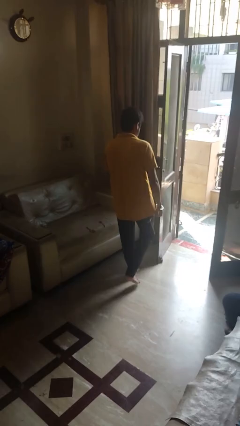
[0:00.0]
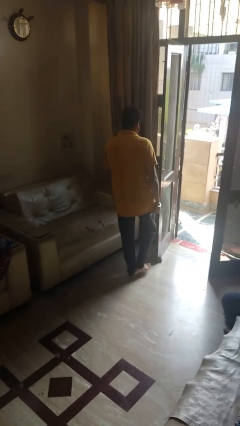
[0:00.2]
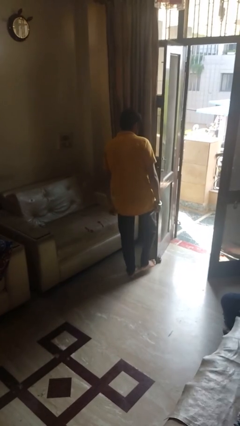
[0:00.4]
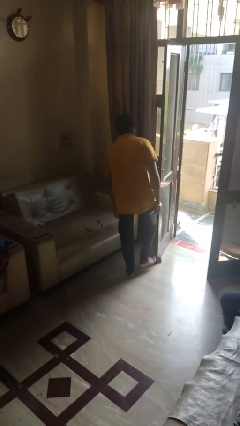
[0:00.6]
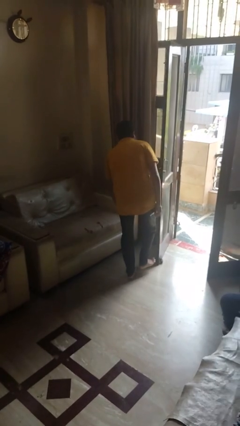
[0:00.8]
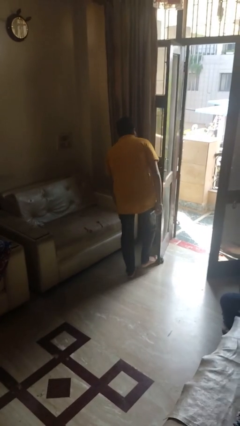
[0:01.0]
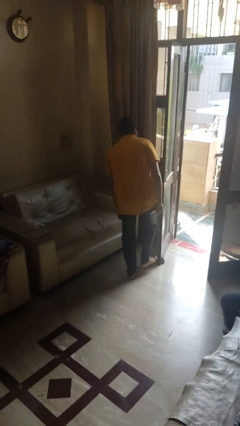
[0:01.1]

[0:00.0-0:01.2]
person stubs toe

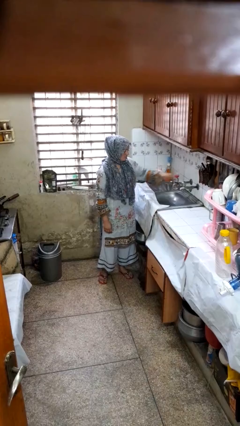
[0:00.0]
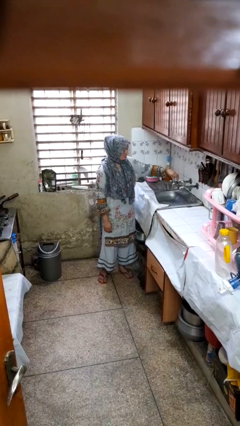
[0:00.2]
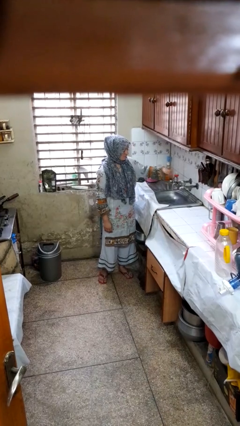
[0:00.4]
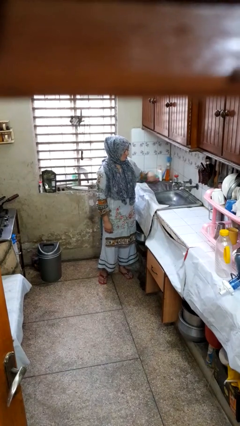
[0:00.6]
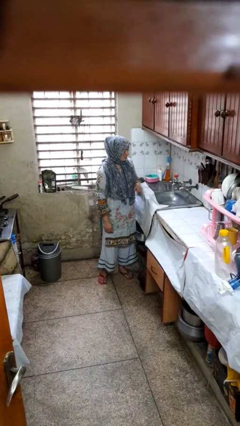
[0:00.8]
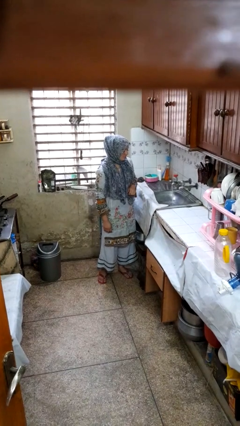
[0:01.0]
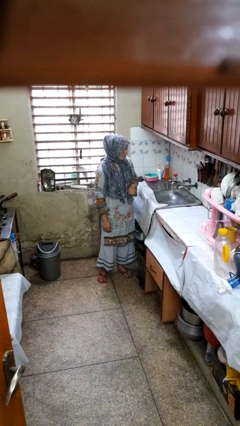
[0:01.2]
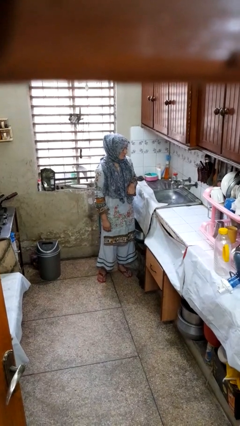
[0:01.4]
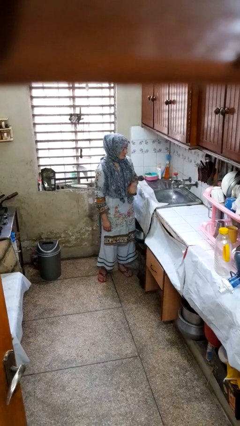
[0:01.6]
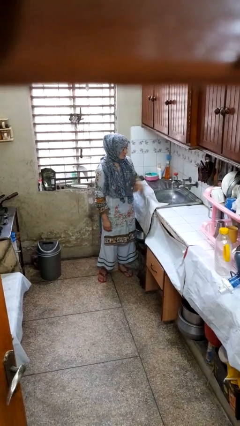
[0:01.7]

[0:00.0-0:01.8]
person turns on faucet

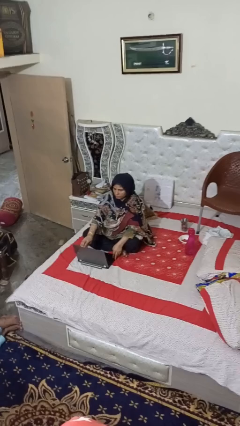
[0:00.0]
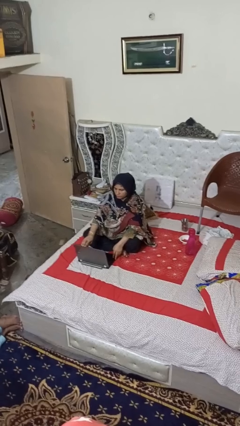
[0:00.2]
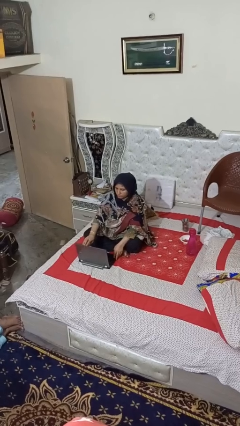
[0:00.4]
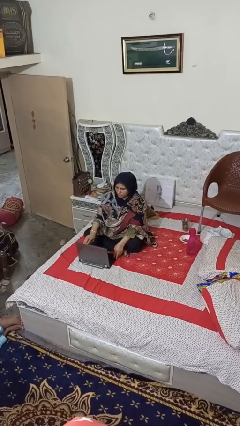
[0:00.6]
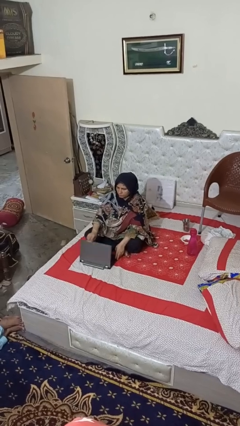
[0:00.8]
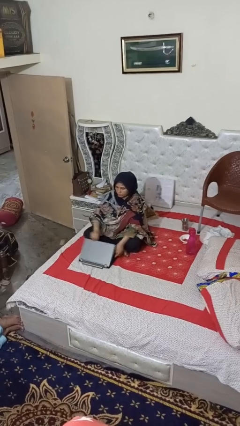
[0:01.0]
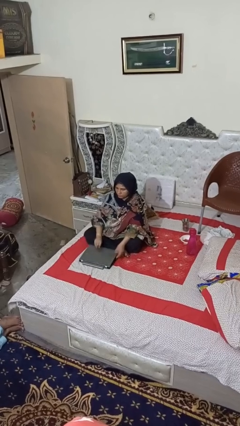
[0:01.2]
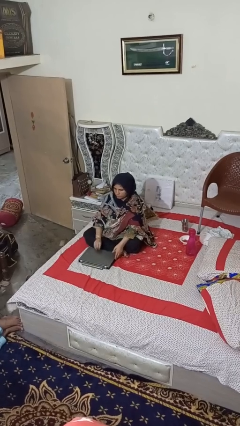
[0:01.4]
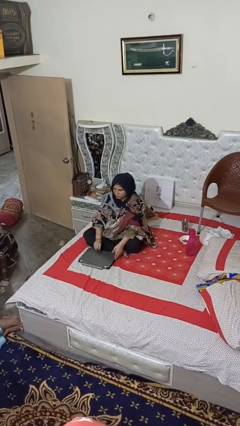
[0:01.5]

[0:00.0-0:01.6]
person closes laptop

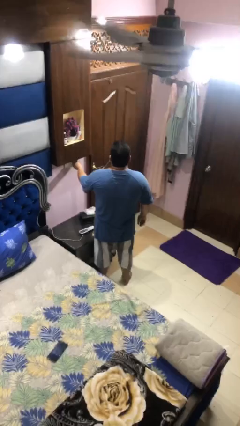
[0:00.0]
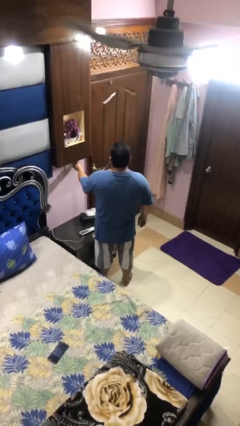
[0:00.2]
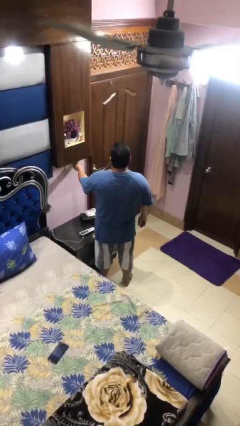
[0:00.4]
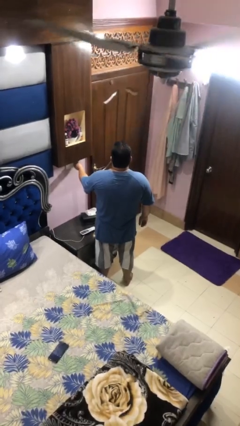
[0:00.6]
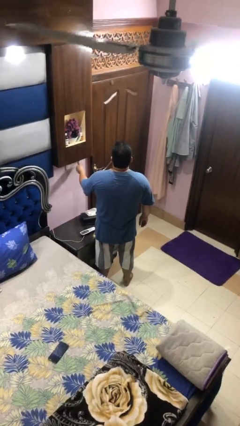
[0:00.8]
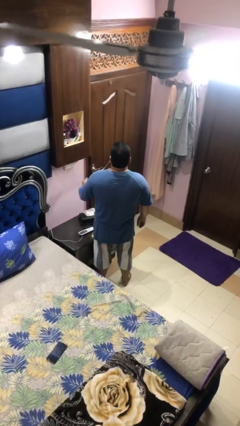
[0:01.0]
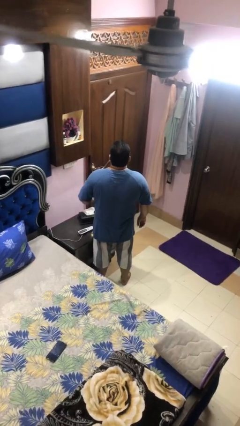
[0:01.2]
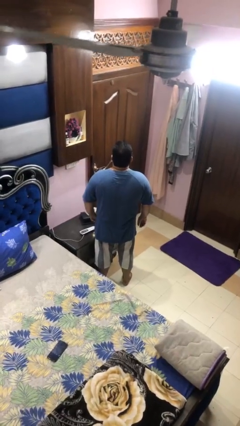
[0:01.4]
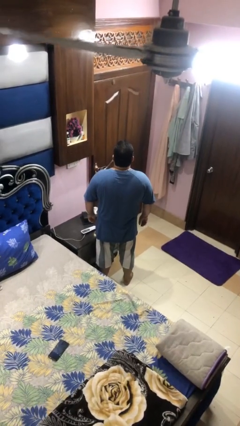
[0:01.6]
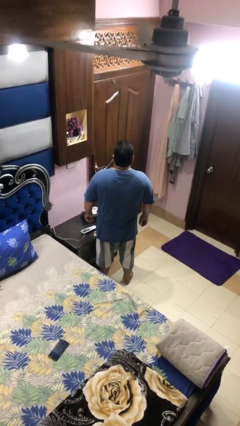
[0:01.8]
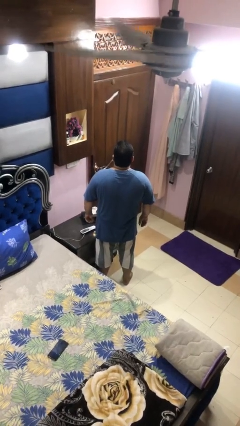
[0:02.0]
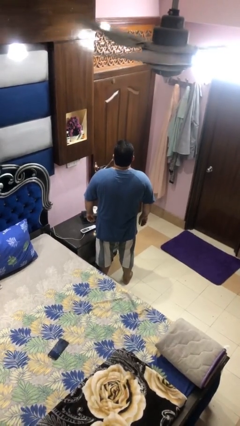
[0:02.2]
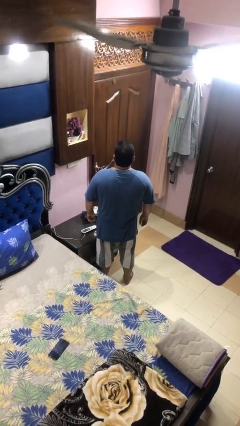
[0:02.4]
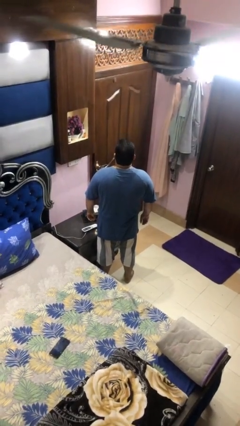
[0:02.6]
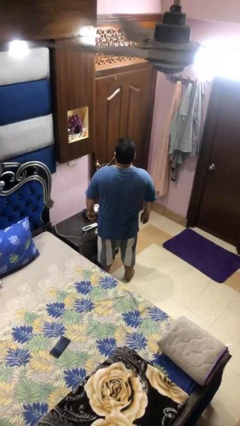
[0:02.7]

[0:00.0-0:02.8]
person turns off fan

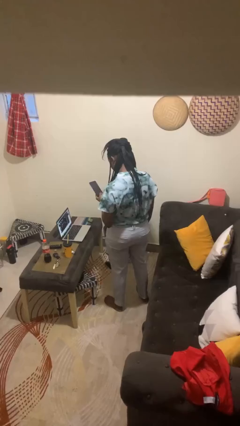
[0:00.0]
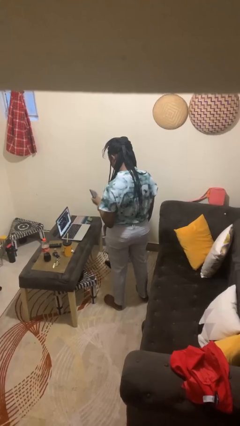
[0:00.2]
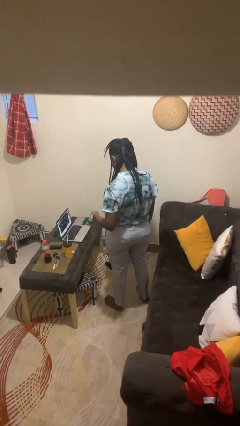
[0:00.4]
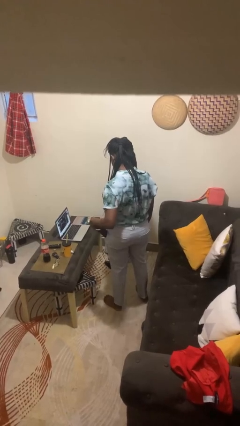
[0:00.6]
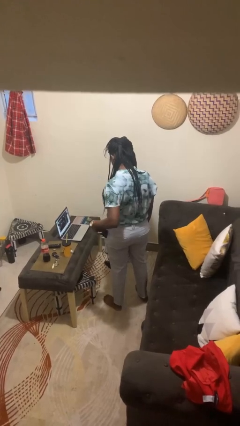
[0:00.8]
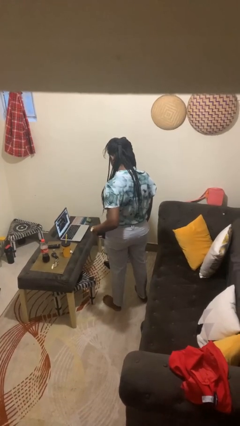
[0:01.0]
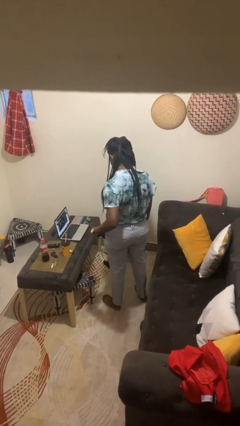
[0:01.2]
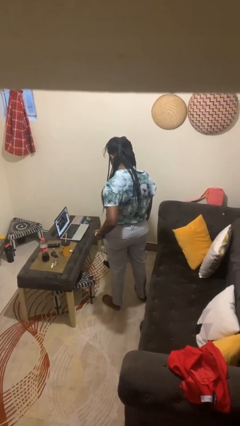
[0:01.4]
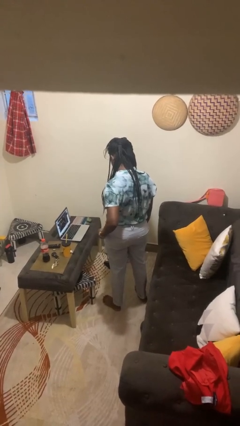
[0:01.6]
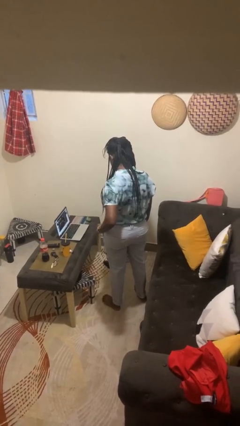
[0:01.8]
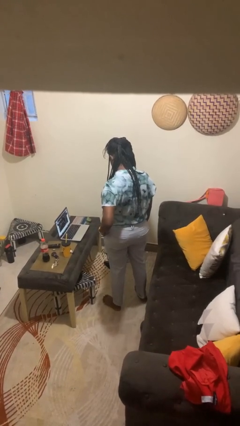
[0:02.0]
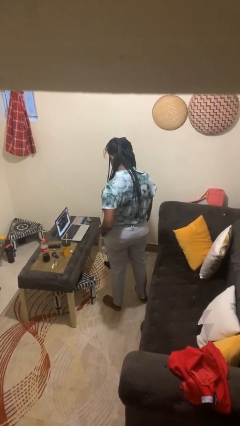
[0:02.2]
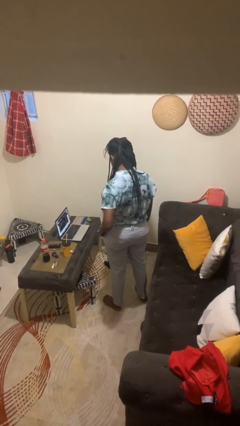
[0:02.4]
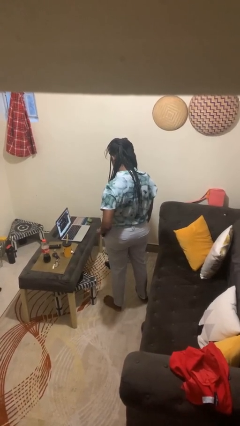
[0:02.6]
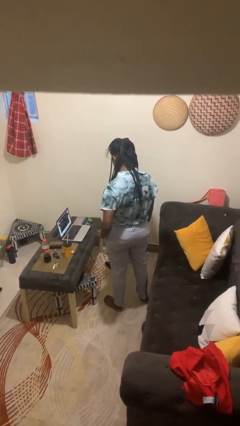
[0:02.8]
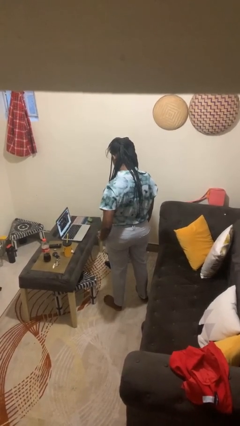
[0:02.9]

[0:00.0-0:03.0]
person puts phone into pocket

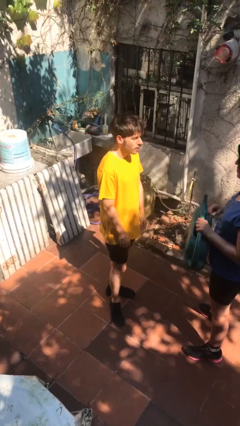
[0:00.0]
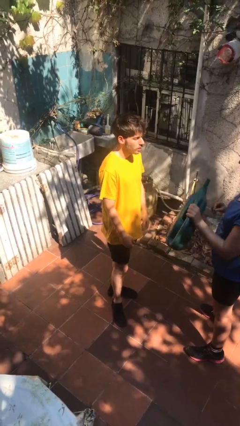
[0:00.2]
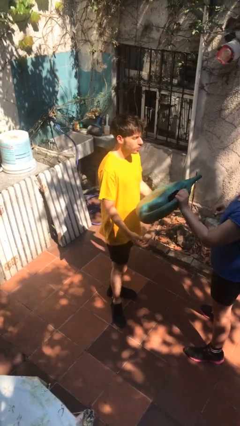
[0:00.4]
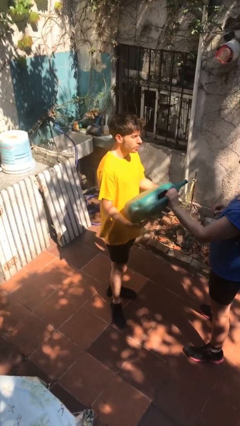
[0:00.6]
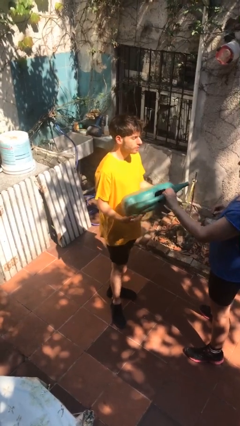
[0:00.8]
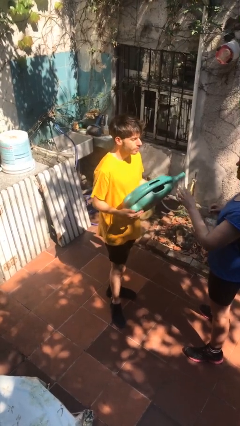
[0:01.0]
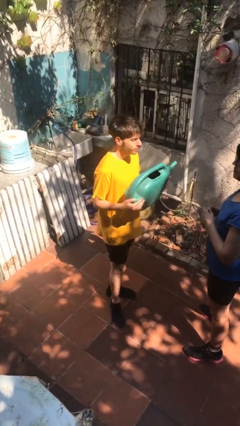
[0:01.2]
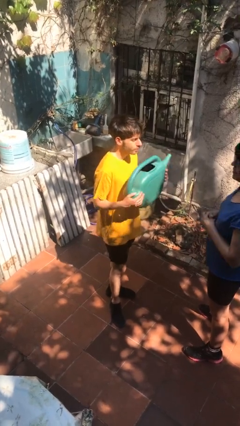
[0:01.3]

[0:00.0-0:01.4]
person transfers object to person

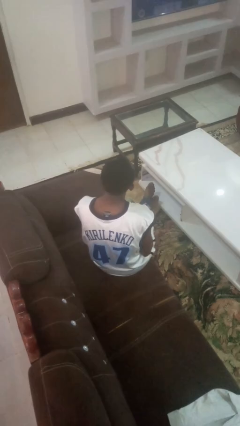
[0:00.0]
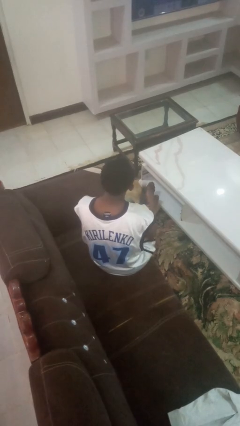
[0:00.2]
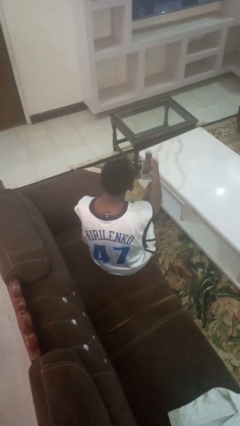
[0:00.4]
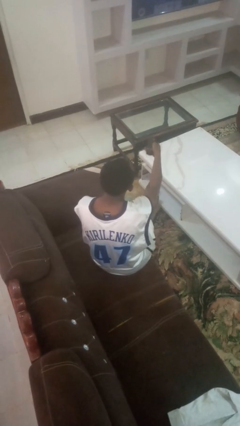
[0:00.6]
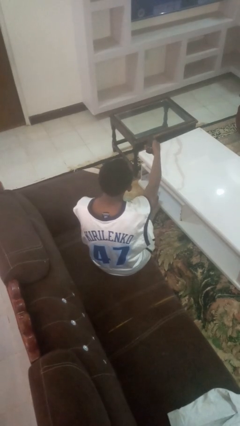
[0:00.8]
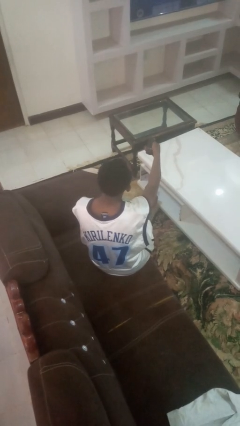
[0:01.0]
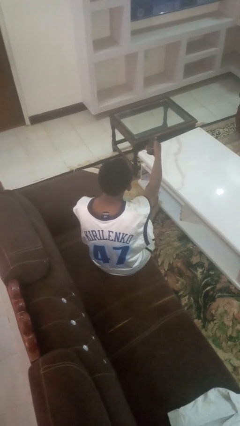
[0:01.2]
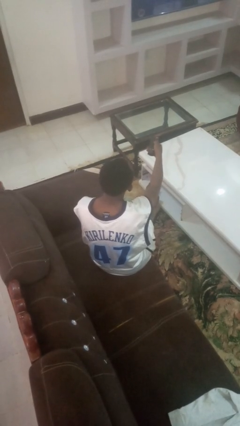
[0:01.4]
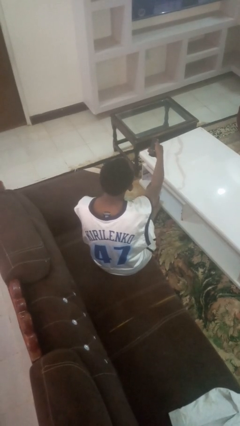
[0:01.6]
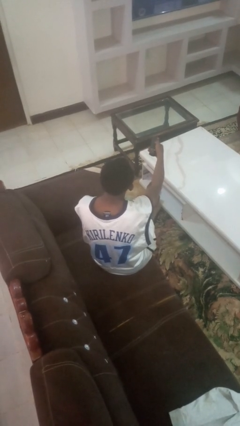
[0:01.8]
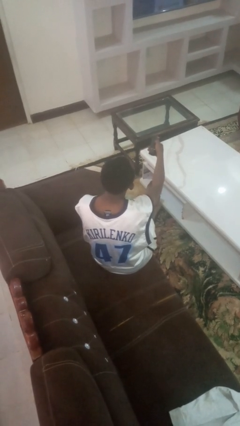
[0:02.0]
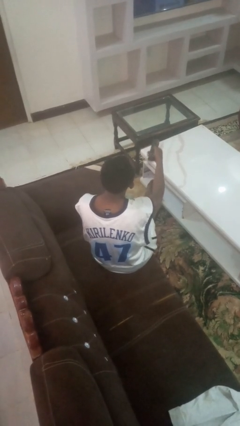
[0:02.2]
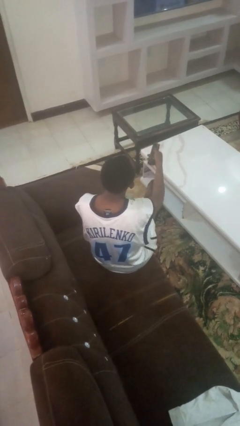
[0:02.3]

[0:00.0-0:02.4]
person uses television remote

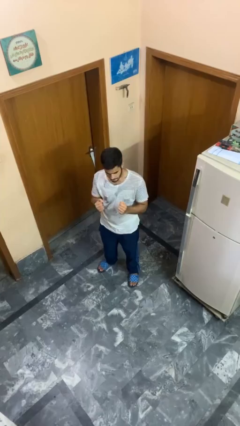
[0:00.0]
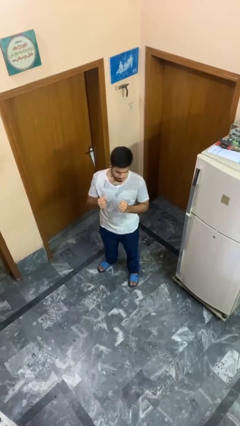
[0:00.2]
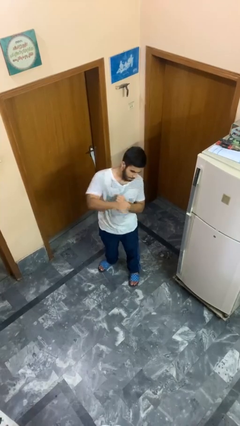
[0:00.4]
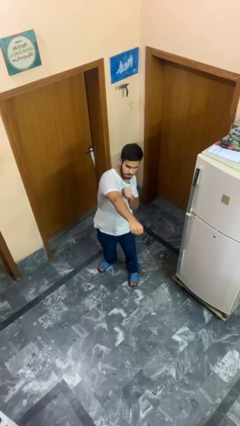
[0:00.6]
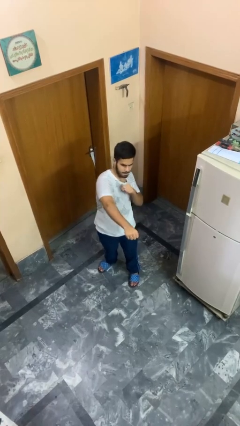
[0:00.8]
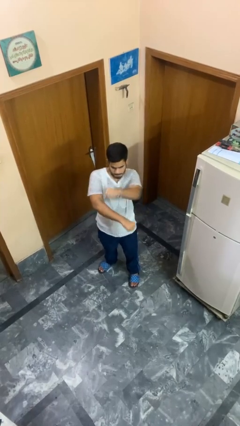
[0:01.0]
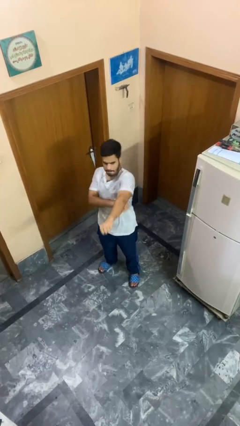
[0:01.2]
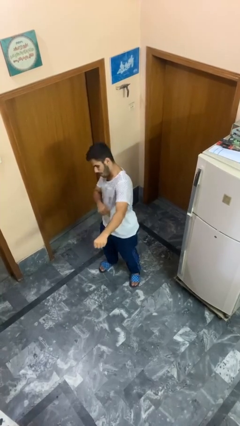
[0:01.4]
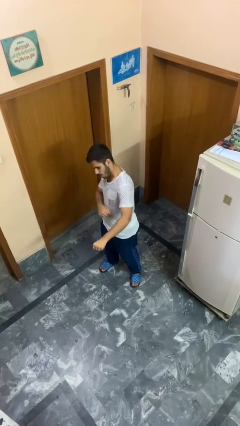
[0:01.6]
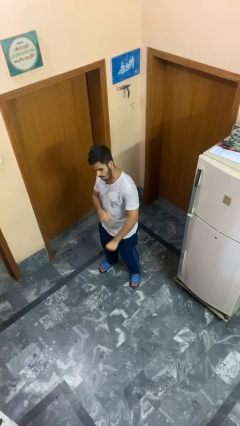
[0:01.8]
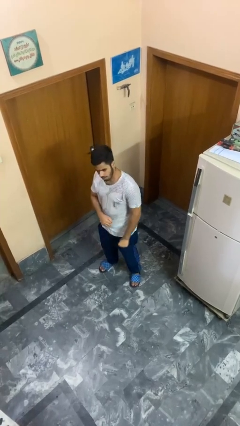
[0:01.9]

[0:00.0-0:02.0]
person punches

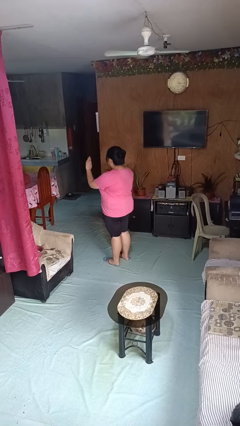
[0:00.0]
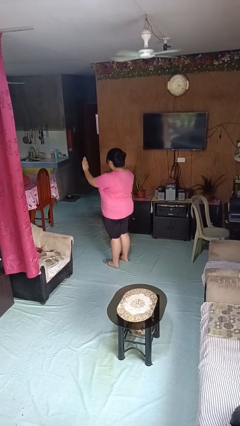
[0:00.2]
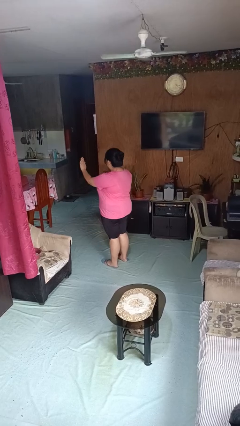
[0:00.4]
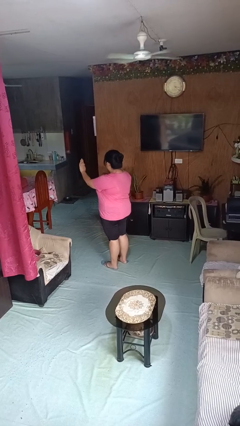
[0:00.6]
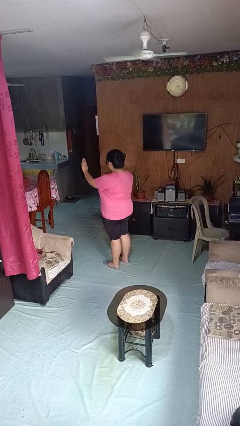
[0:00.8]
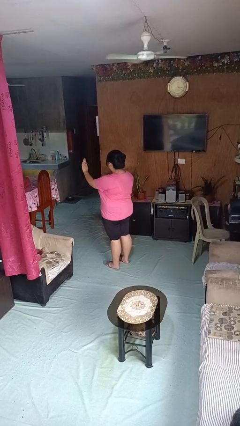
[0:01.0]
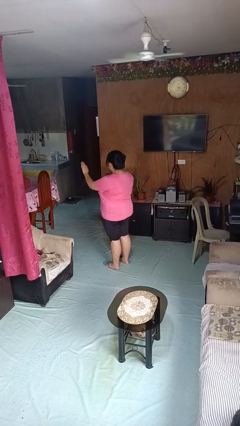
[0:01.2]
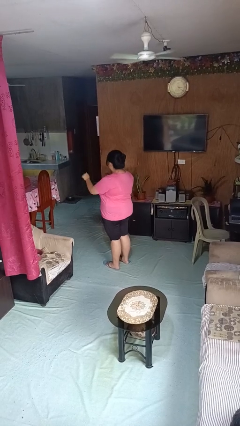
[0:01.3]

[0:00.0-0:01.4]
person gestures stop
